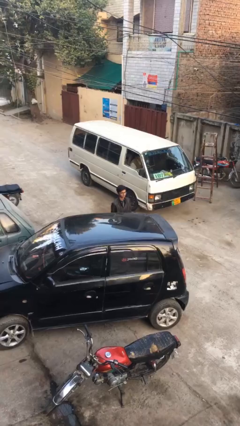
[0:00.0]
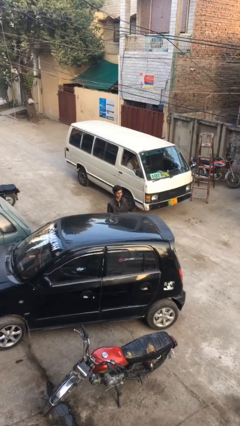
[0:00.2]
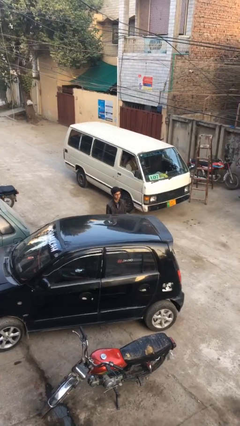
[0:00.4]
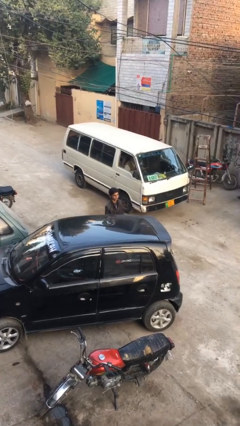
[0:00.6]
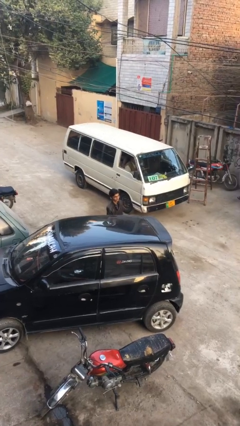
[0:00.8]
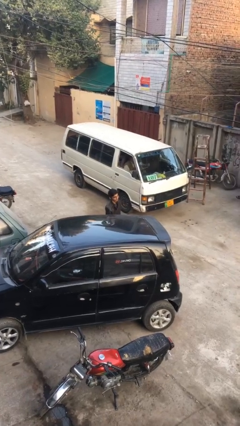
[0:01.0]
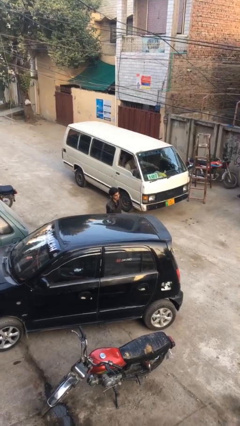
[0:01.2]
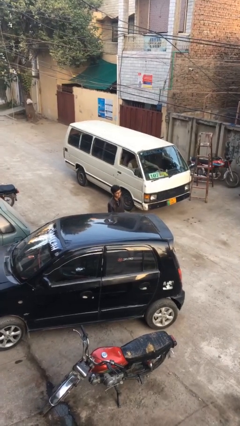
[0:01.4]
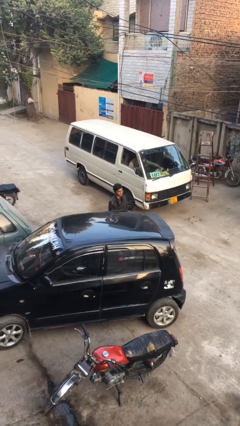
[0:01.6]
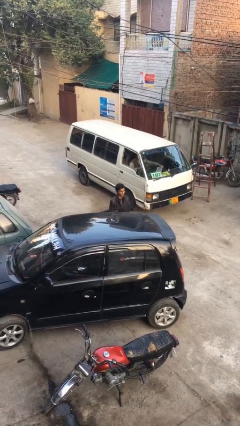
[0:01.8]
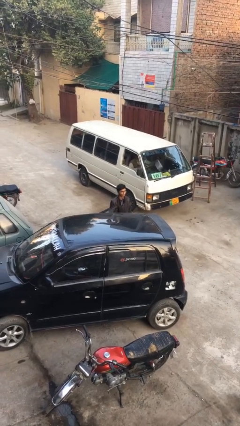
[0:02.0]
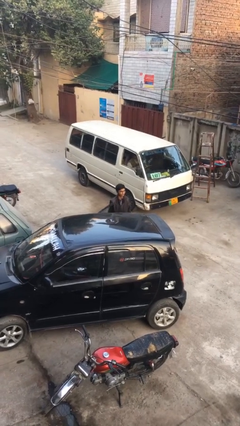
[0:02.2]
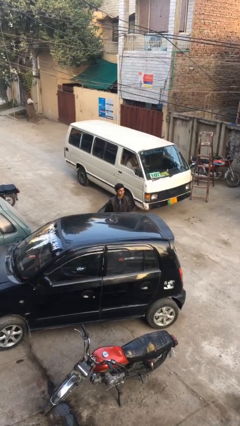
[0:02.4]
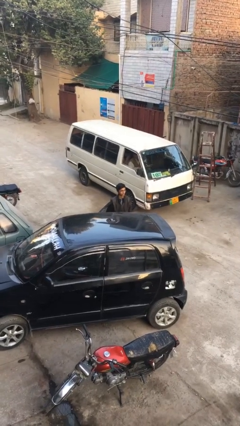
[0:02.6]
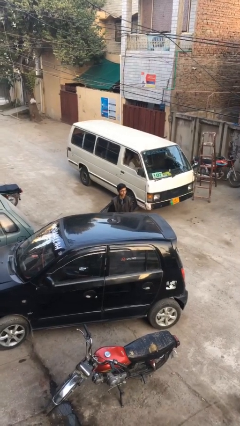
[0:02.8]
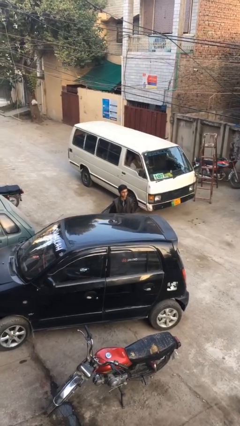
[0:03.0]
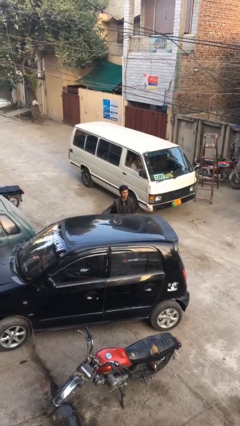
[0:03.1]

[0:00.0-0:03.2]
person opens car door

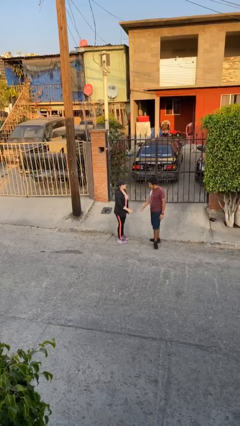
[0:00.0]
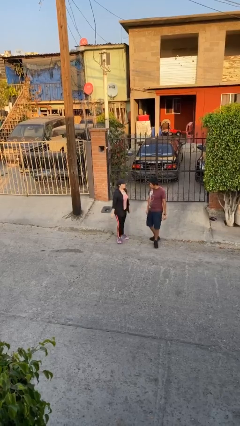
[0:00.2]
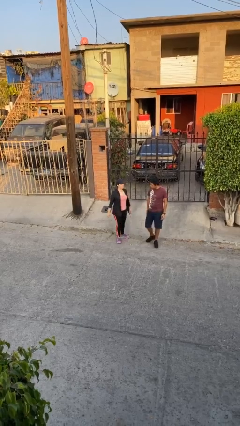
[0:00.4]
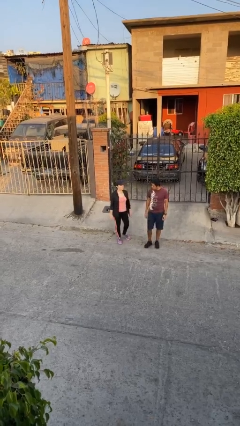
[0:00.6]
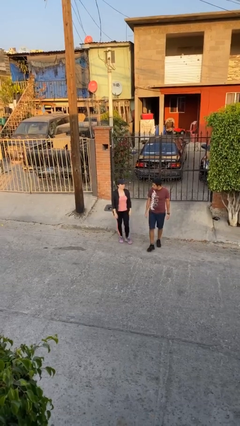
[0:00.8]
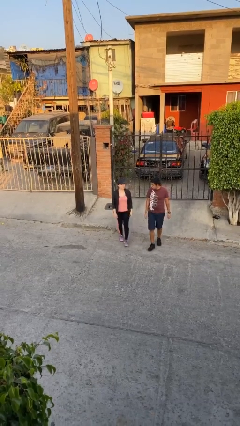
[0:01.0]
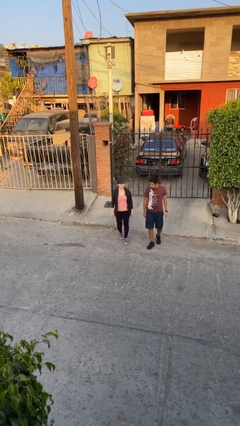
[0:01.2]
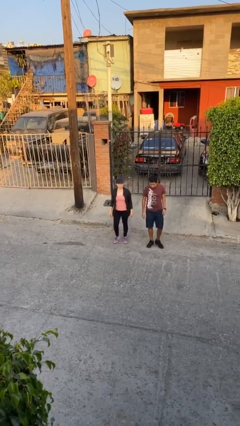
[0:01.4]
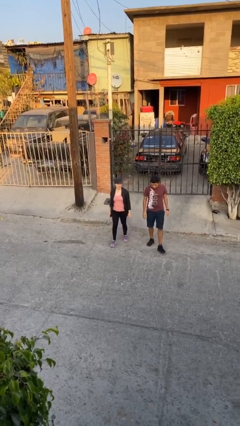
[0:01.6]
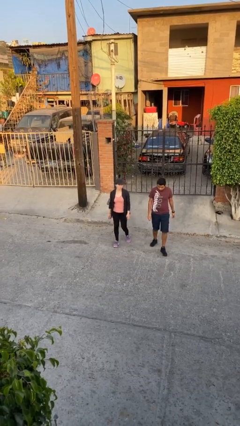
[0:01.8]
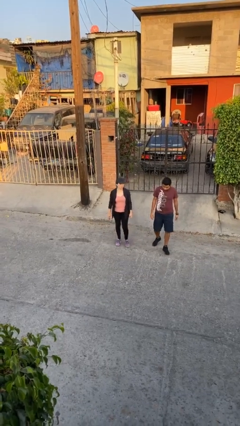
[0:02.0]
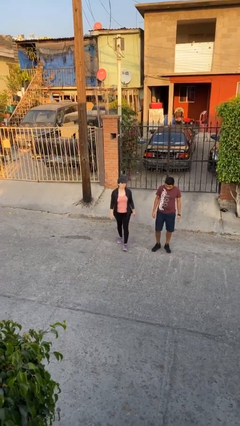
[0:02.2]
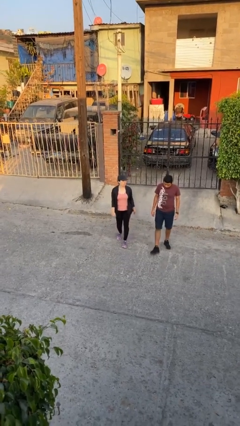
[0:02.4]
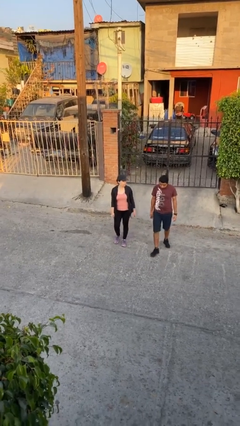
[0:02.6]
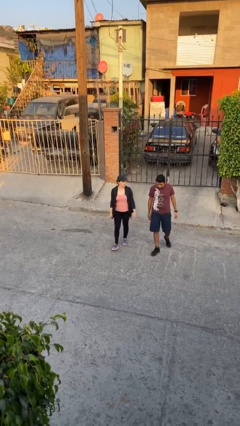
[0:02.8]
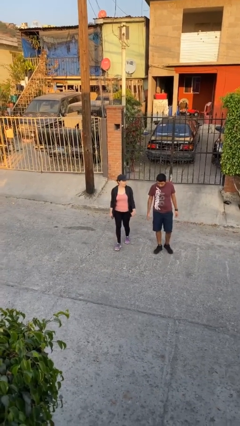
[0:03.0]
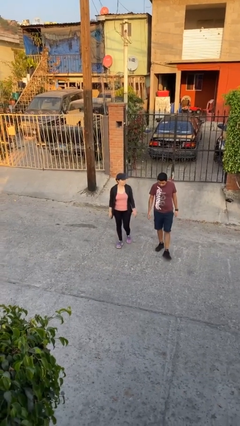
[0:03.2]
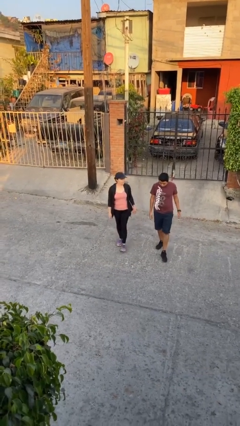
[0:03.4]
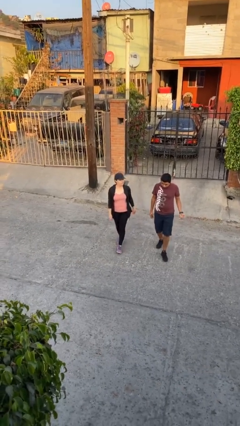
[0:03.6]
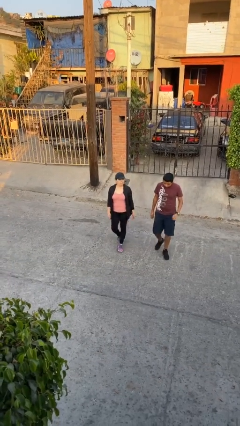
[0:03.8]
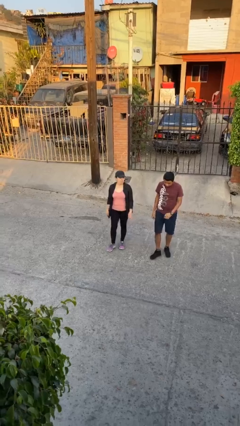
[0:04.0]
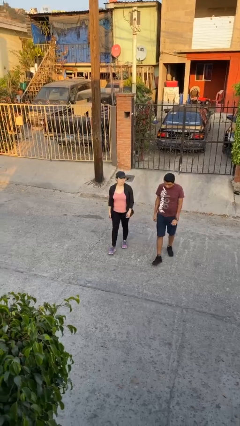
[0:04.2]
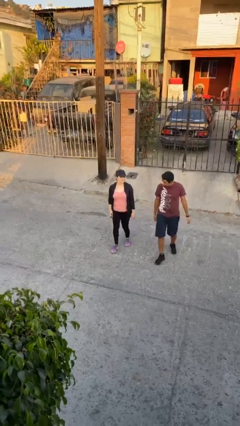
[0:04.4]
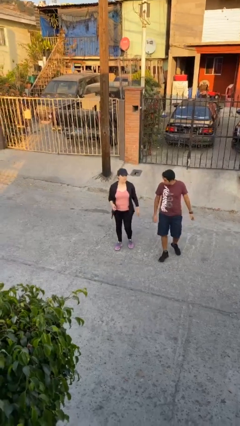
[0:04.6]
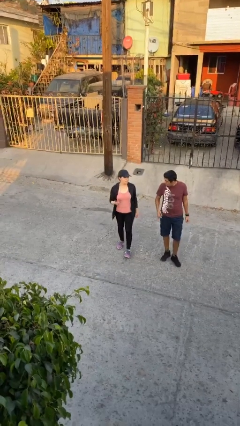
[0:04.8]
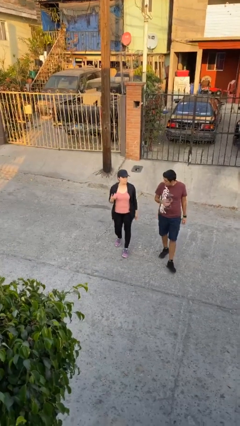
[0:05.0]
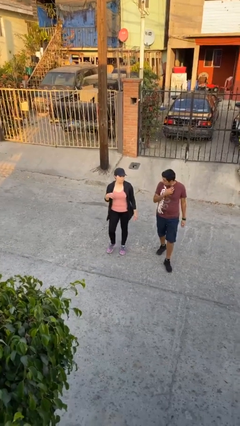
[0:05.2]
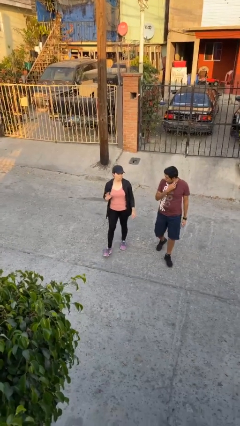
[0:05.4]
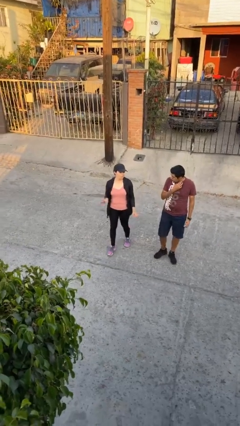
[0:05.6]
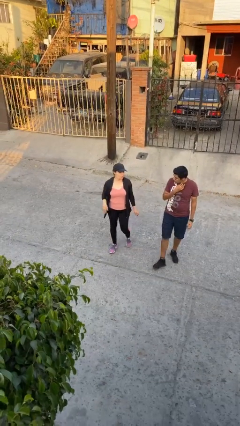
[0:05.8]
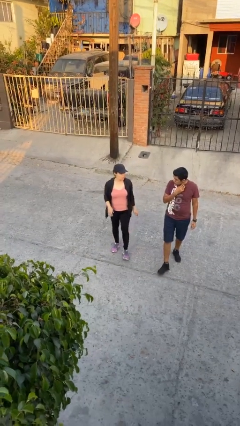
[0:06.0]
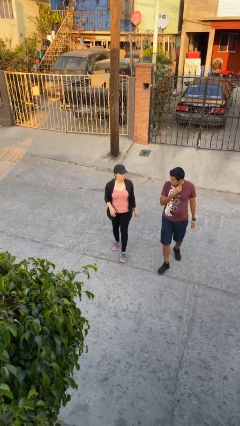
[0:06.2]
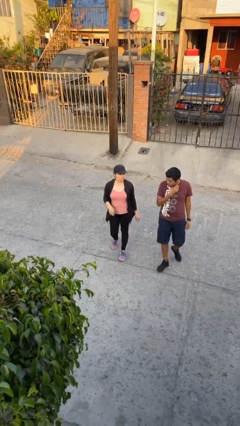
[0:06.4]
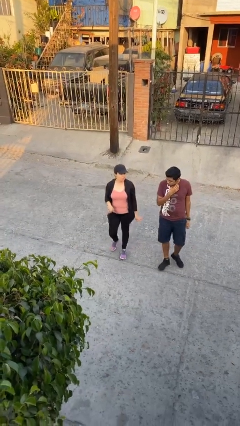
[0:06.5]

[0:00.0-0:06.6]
person talks to person

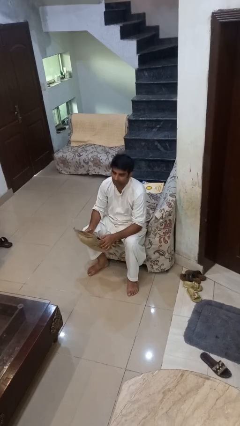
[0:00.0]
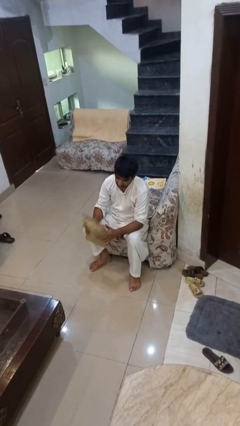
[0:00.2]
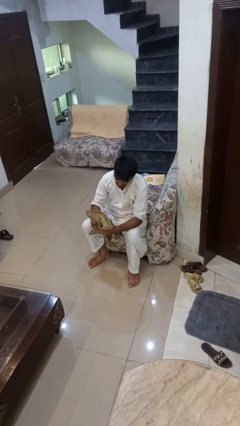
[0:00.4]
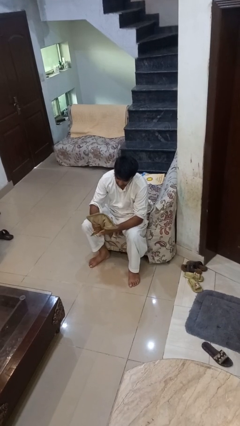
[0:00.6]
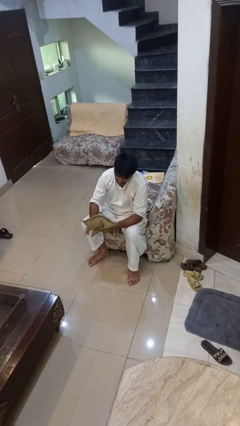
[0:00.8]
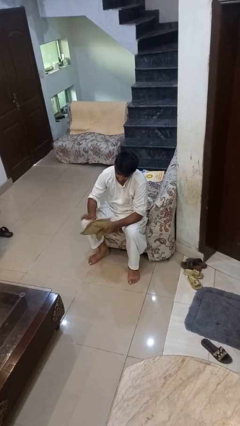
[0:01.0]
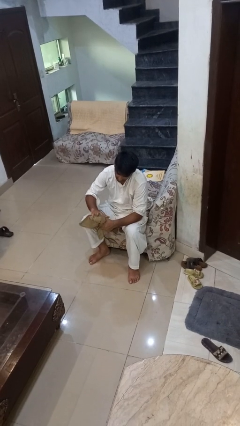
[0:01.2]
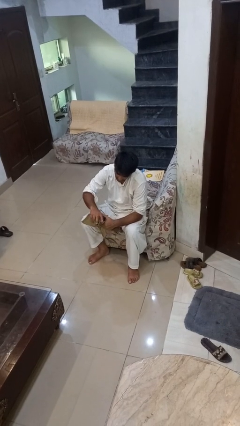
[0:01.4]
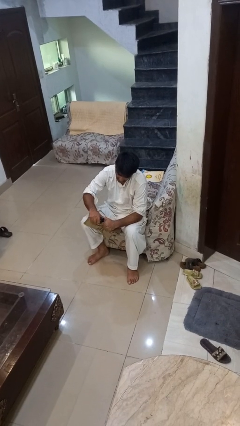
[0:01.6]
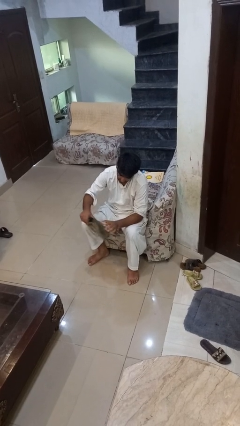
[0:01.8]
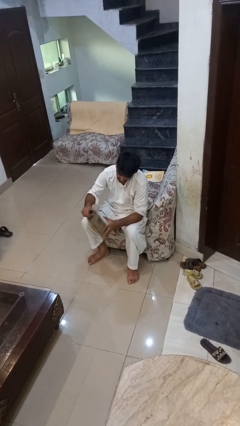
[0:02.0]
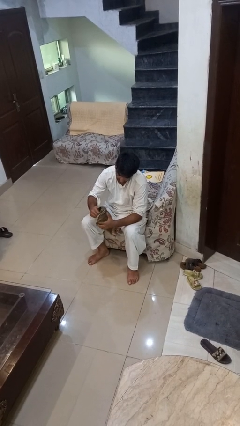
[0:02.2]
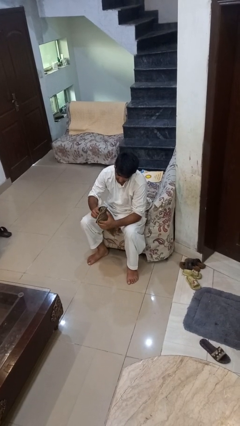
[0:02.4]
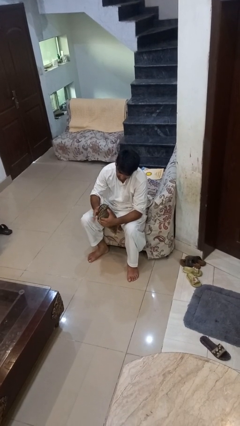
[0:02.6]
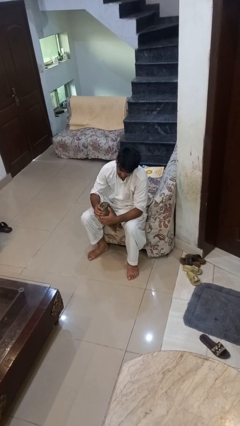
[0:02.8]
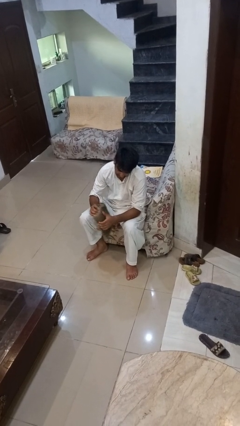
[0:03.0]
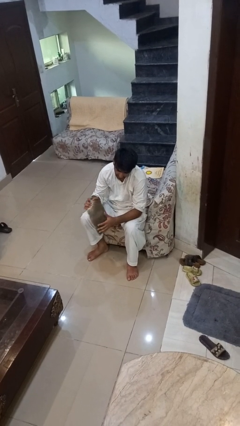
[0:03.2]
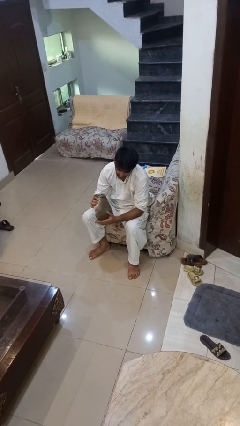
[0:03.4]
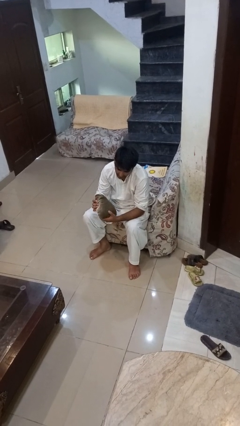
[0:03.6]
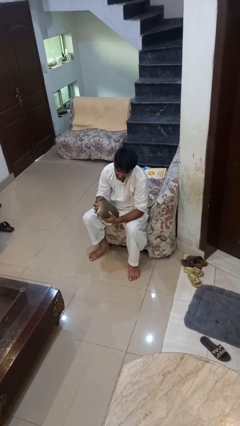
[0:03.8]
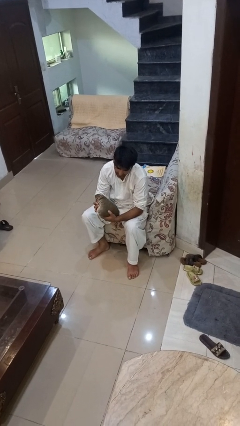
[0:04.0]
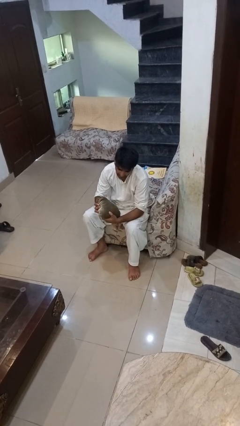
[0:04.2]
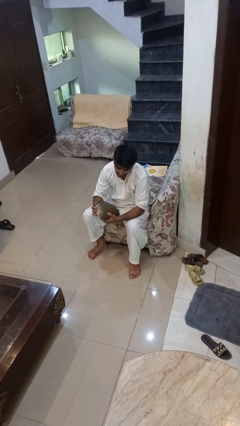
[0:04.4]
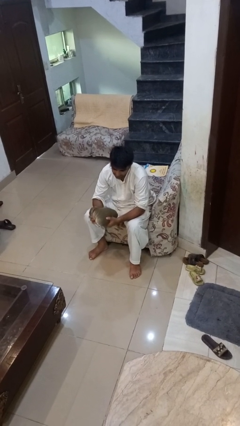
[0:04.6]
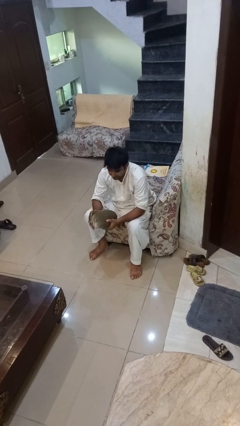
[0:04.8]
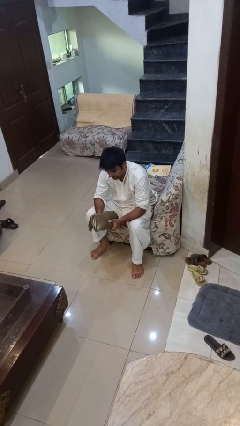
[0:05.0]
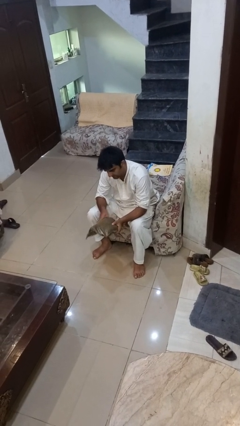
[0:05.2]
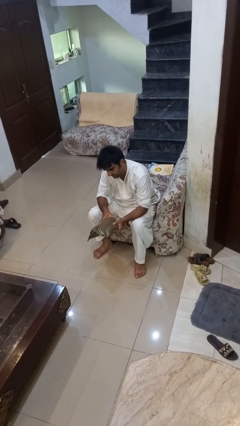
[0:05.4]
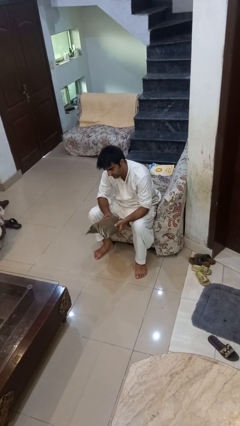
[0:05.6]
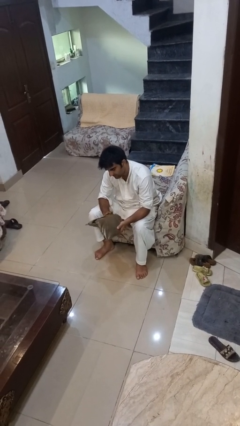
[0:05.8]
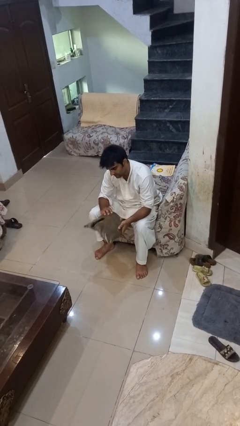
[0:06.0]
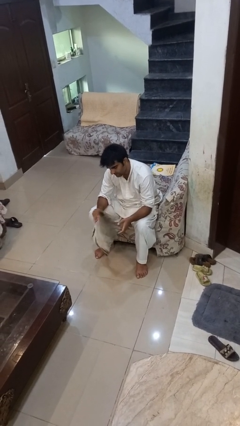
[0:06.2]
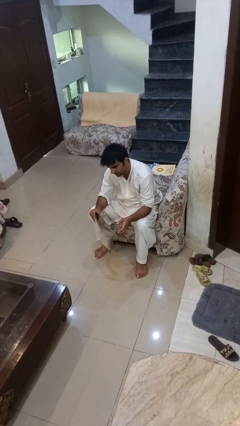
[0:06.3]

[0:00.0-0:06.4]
person squeezes object

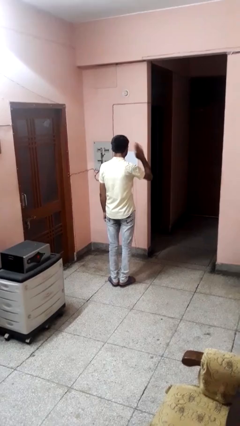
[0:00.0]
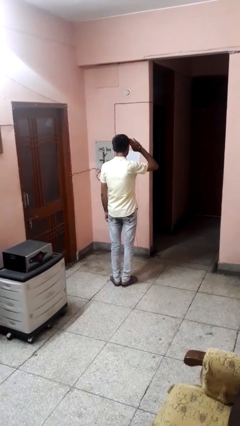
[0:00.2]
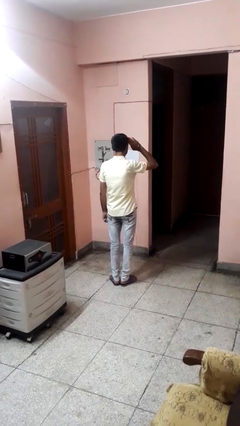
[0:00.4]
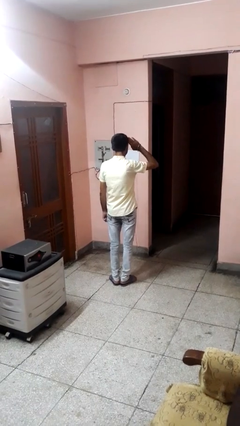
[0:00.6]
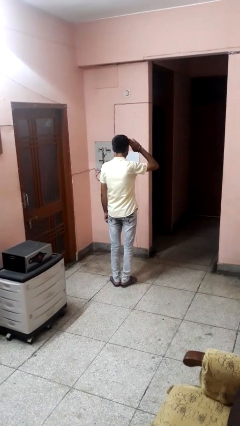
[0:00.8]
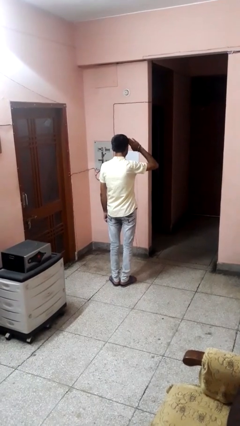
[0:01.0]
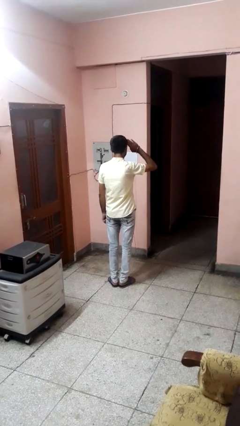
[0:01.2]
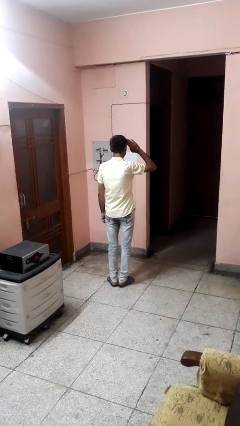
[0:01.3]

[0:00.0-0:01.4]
person salutes

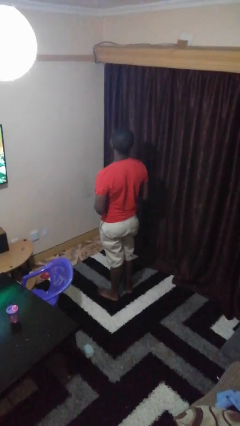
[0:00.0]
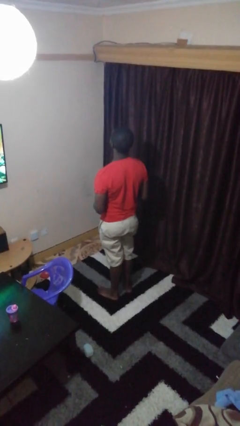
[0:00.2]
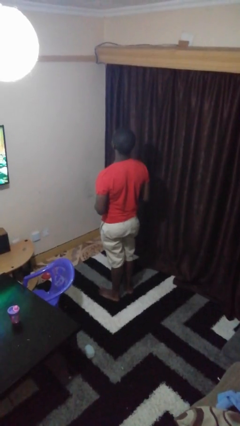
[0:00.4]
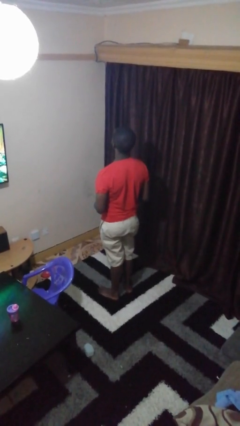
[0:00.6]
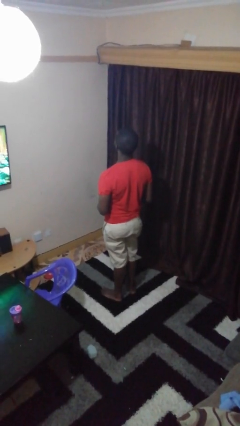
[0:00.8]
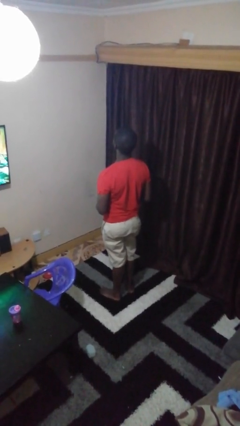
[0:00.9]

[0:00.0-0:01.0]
person picks up object from floor
